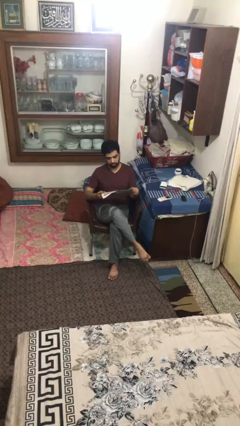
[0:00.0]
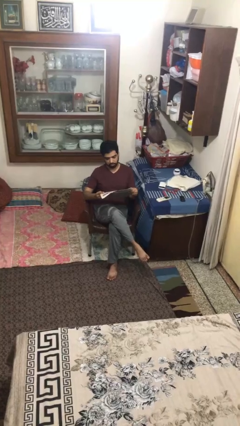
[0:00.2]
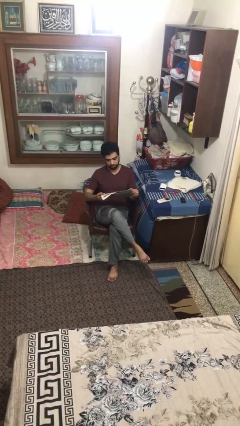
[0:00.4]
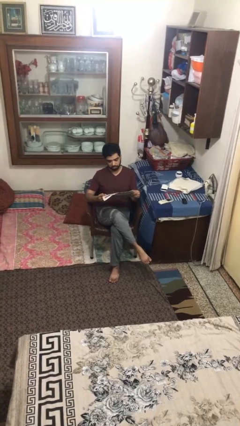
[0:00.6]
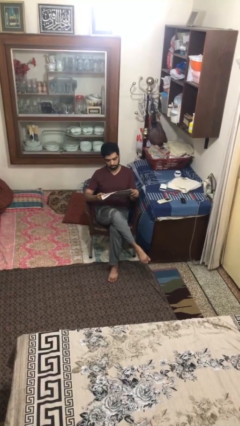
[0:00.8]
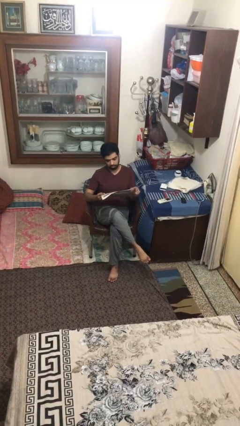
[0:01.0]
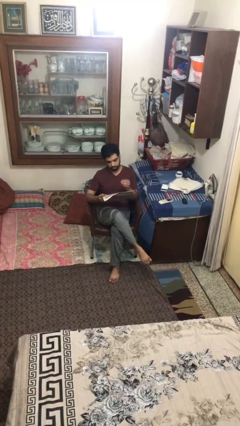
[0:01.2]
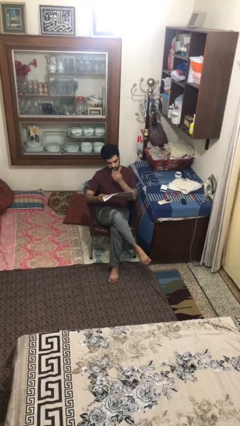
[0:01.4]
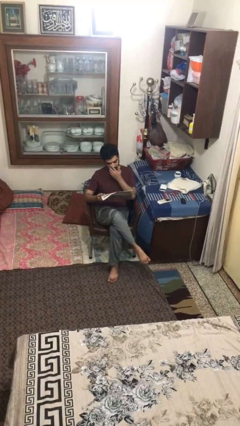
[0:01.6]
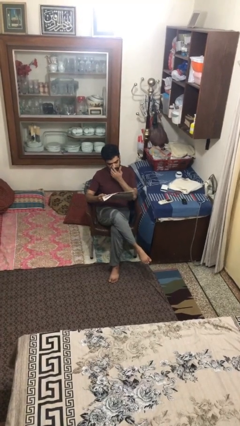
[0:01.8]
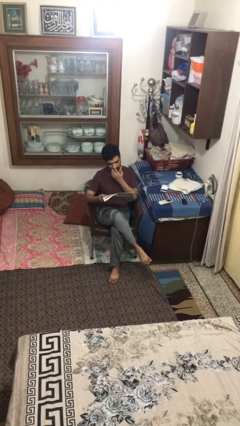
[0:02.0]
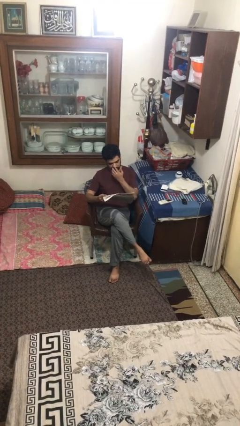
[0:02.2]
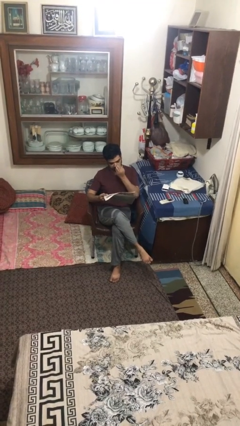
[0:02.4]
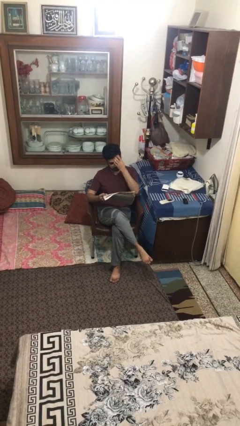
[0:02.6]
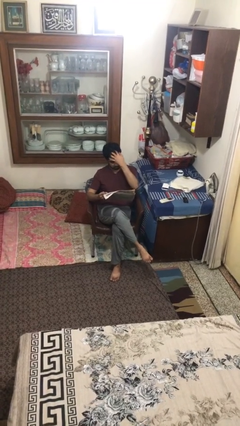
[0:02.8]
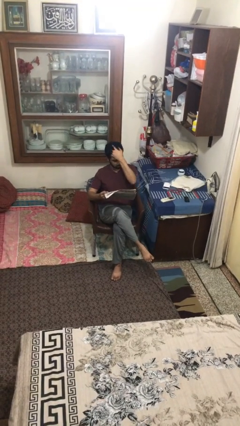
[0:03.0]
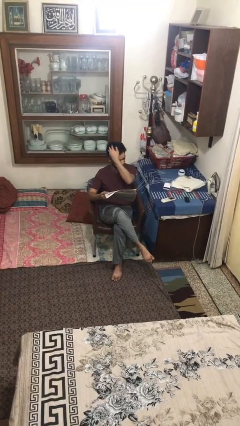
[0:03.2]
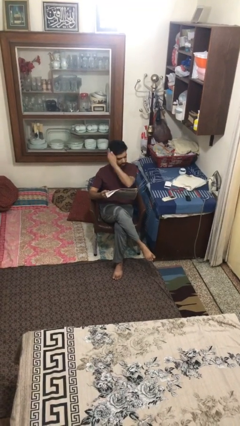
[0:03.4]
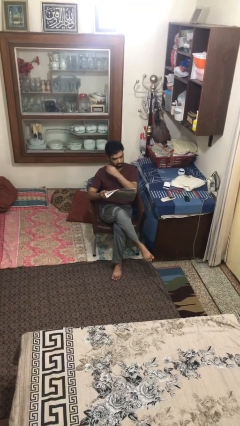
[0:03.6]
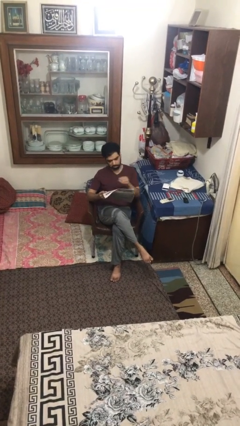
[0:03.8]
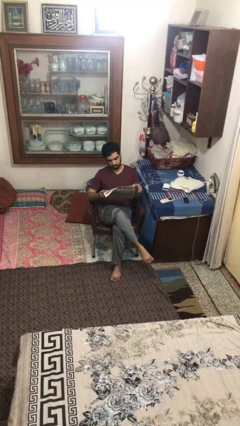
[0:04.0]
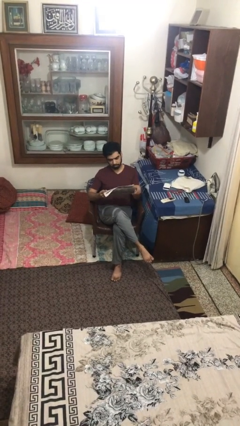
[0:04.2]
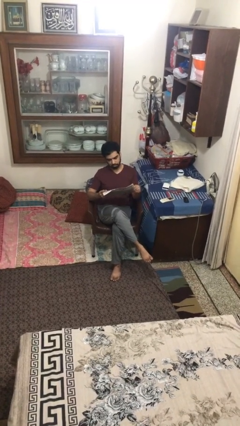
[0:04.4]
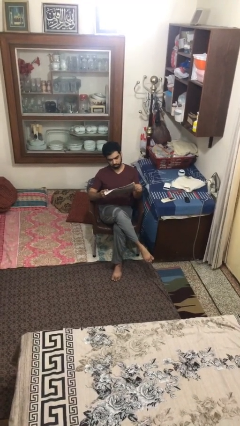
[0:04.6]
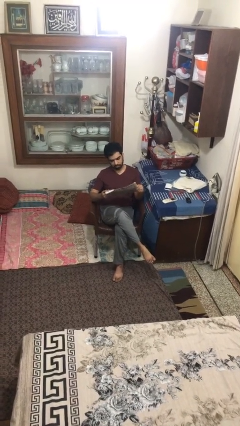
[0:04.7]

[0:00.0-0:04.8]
person reads document

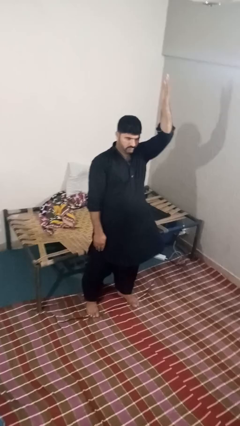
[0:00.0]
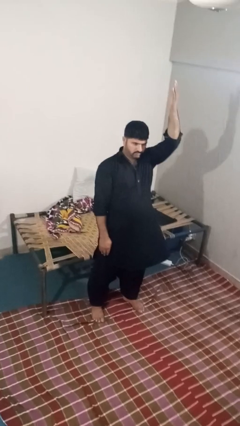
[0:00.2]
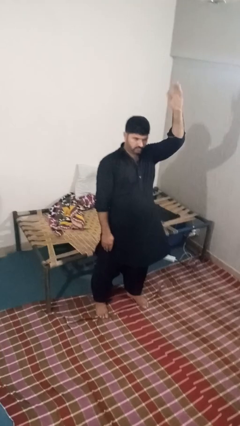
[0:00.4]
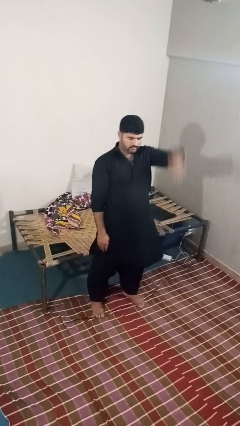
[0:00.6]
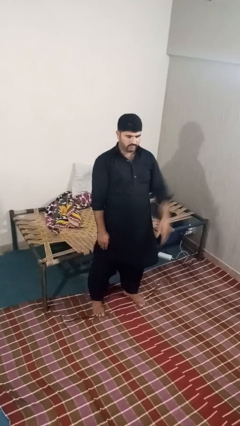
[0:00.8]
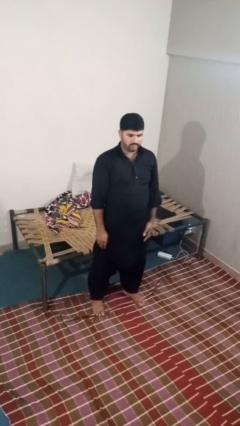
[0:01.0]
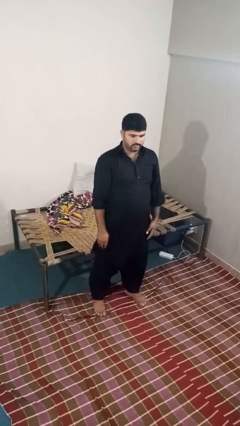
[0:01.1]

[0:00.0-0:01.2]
person gestures swipe down

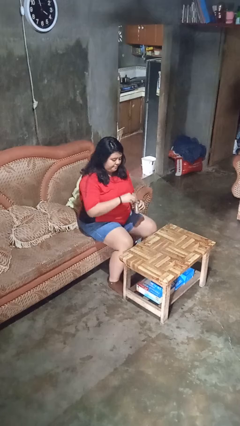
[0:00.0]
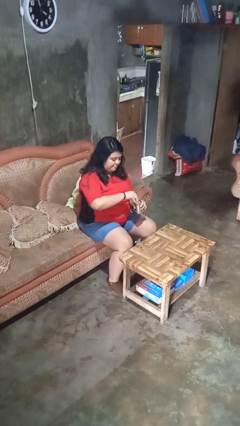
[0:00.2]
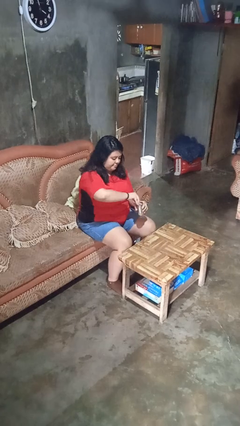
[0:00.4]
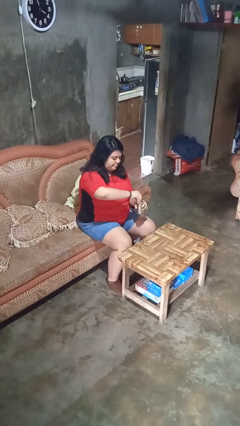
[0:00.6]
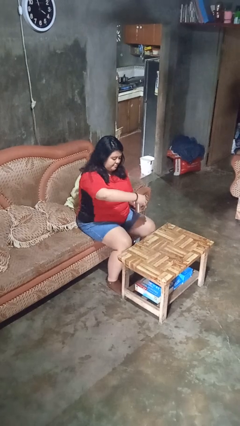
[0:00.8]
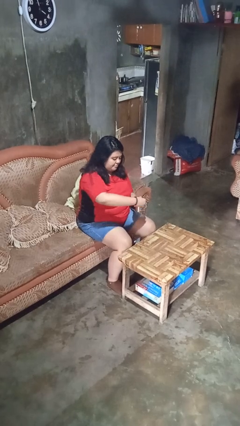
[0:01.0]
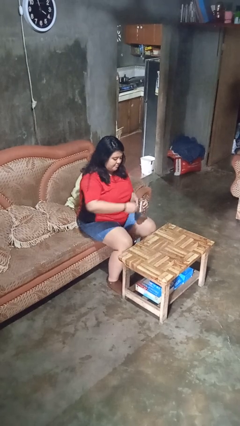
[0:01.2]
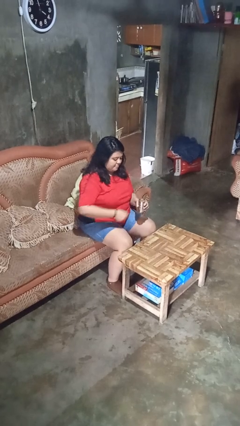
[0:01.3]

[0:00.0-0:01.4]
person opens beverage can

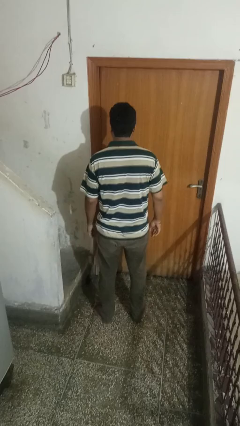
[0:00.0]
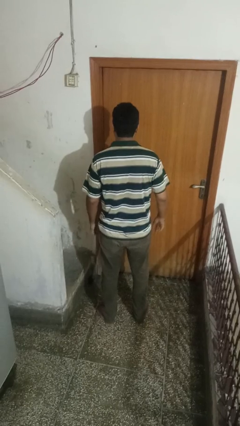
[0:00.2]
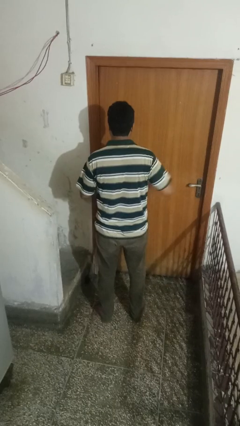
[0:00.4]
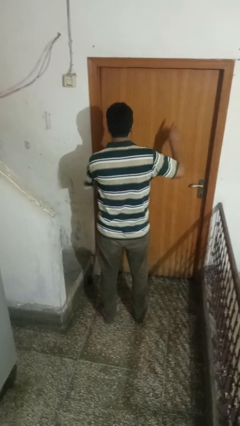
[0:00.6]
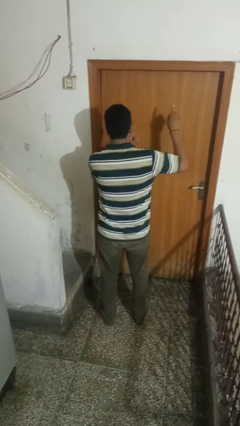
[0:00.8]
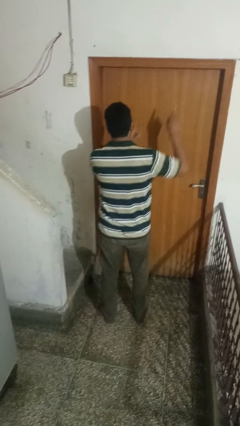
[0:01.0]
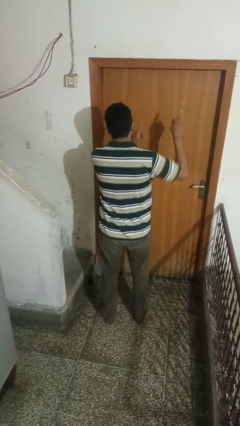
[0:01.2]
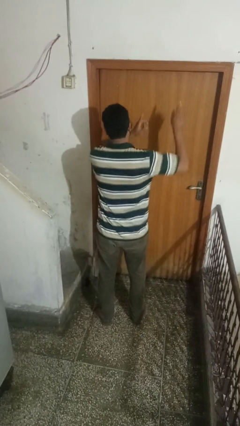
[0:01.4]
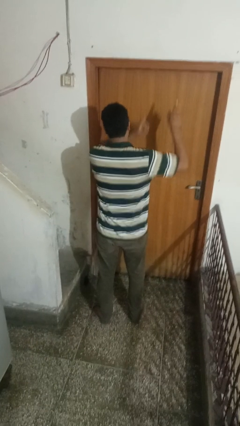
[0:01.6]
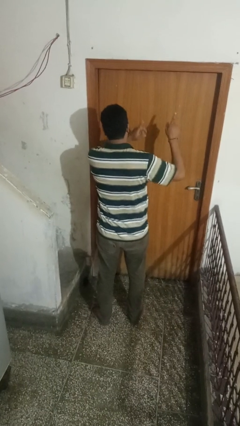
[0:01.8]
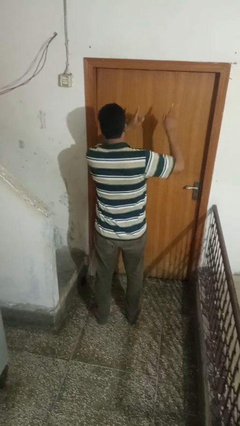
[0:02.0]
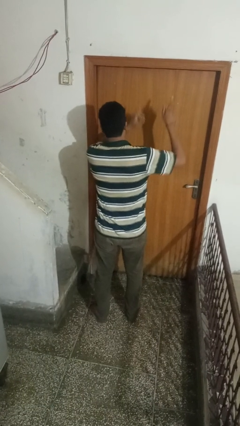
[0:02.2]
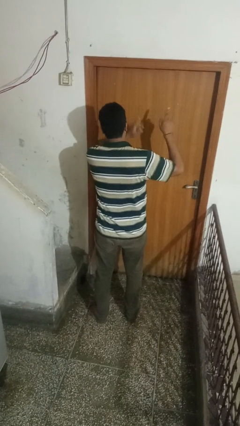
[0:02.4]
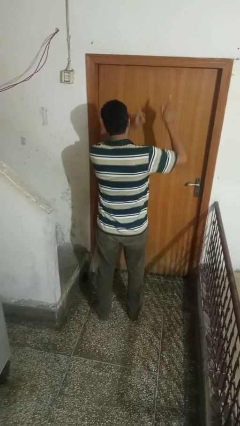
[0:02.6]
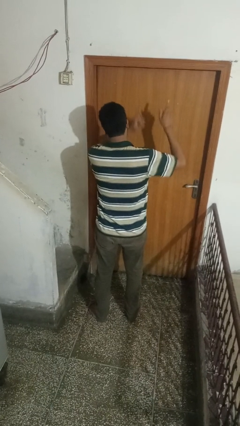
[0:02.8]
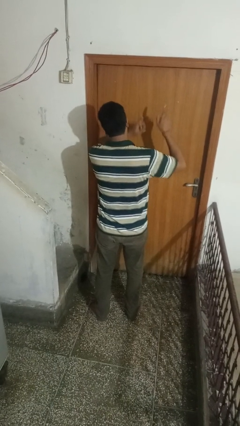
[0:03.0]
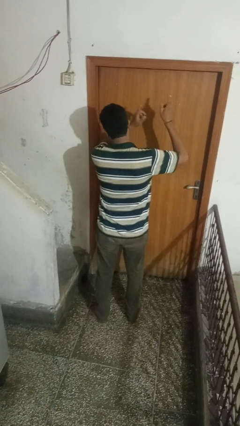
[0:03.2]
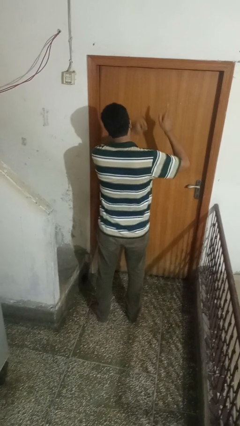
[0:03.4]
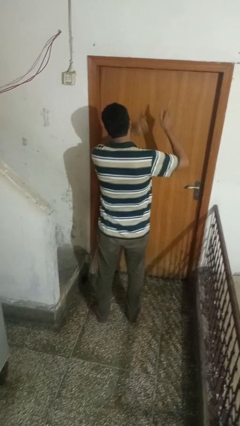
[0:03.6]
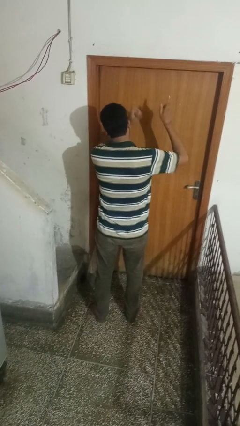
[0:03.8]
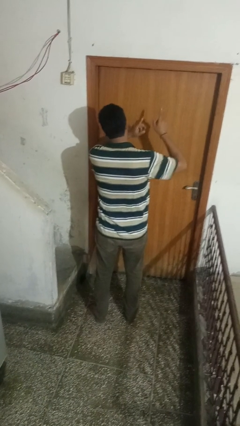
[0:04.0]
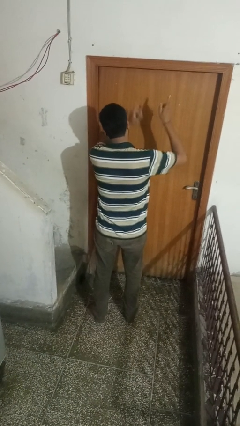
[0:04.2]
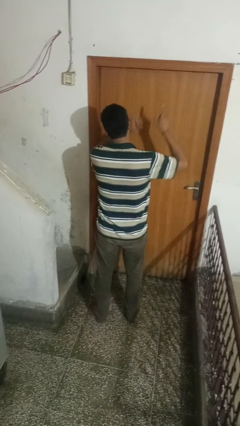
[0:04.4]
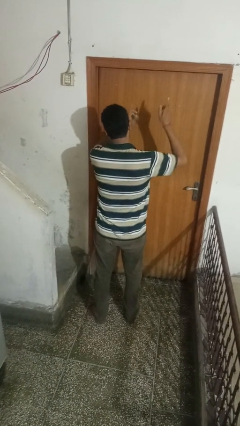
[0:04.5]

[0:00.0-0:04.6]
person dances in place

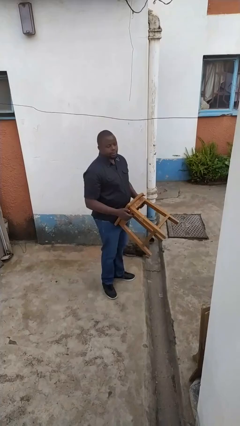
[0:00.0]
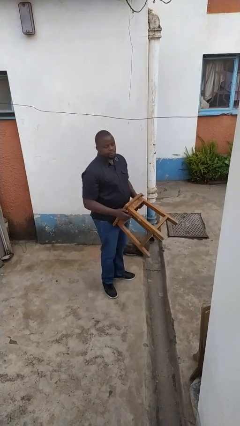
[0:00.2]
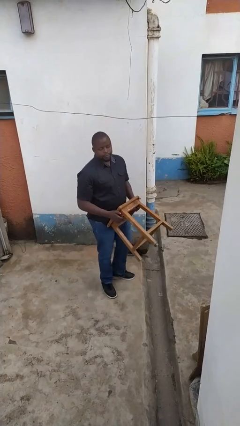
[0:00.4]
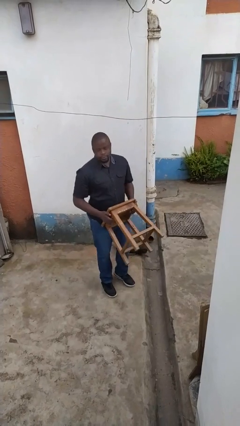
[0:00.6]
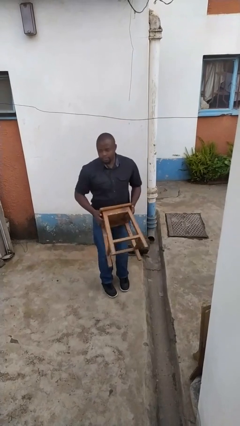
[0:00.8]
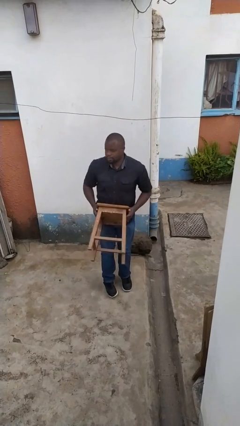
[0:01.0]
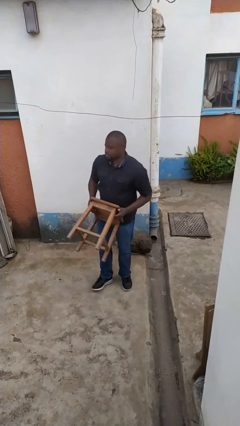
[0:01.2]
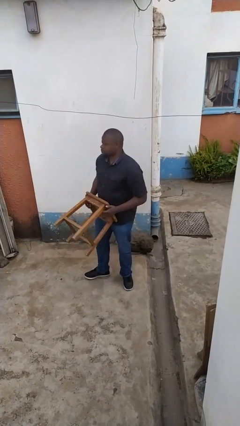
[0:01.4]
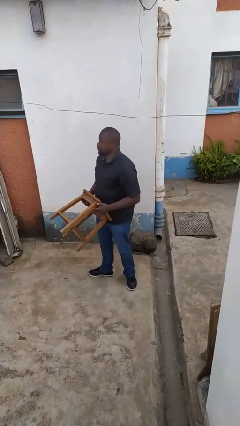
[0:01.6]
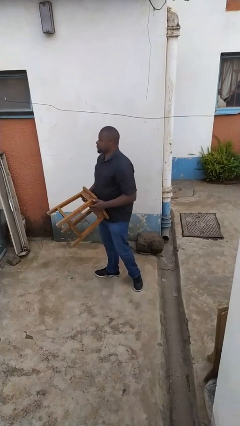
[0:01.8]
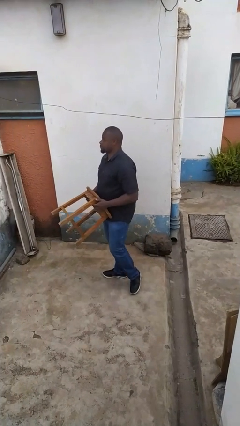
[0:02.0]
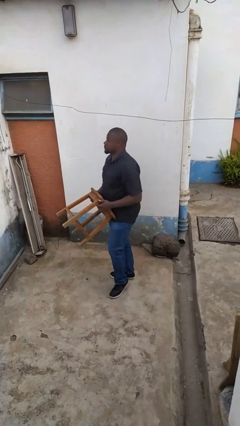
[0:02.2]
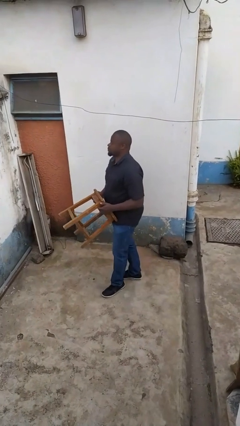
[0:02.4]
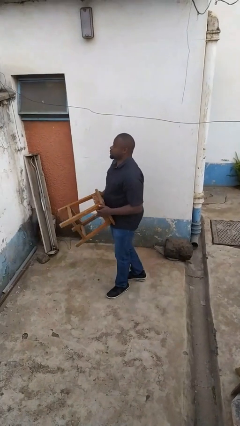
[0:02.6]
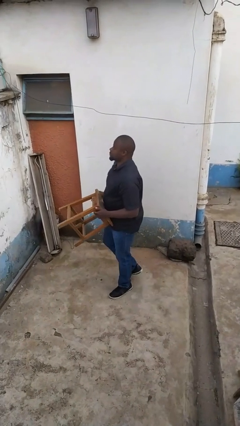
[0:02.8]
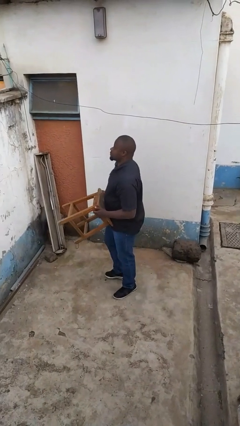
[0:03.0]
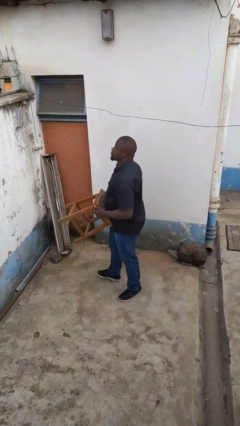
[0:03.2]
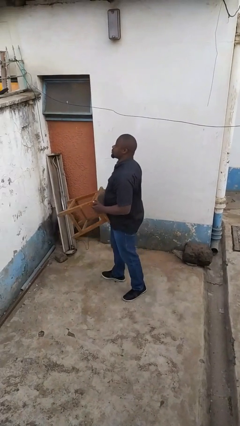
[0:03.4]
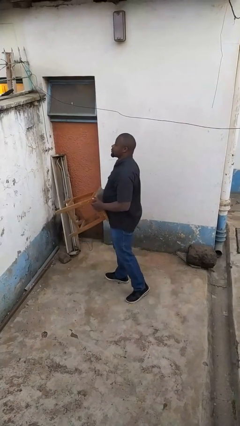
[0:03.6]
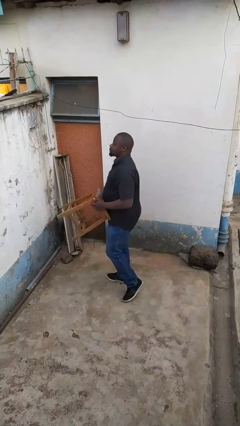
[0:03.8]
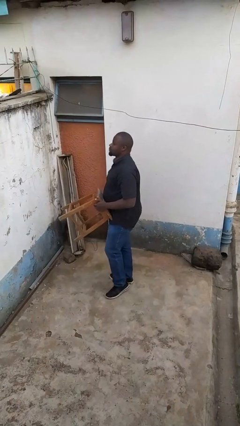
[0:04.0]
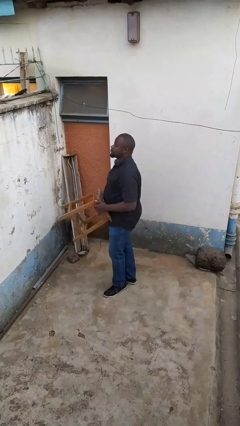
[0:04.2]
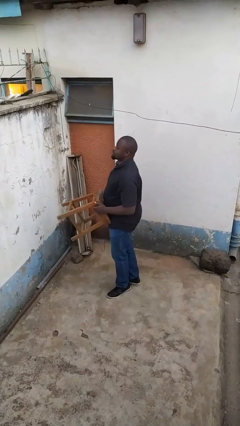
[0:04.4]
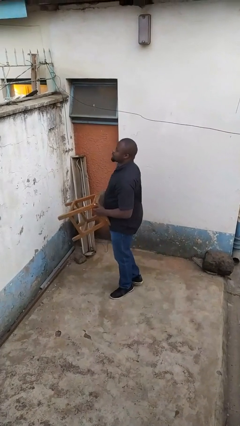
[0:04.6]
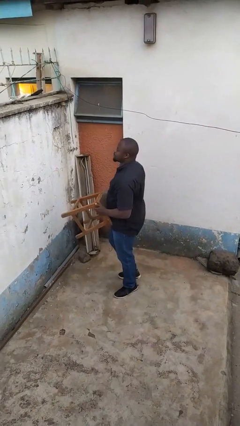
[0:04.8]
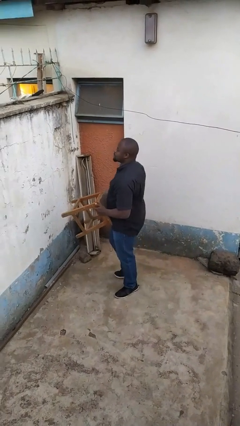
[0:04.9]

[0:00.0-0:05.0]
person carries furniture

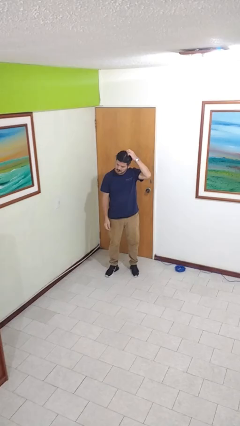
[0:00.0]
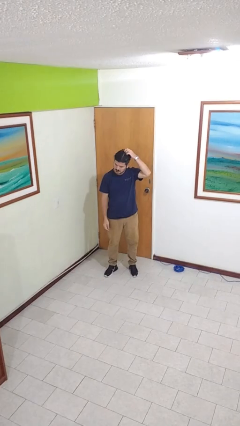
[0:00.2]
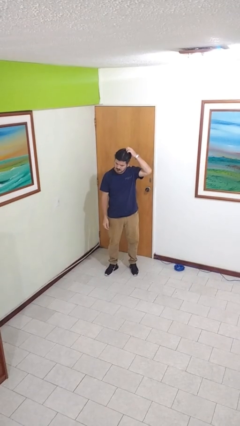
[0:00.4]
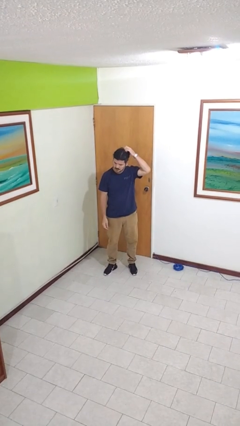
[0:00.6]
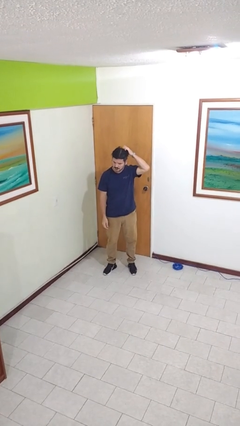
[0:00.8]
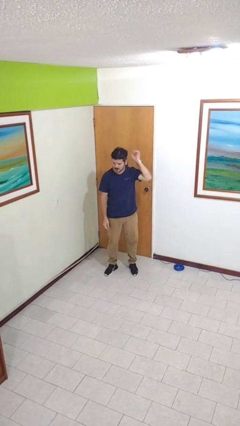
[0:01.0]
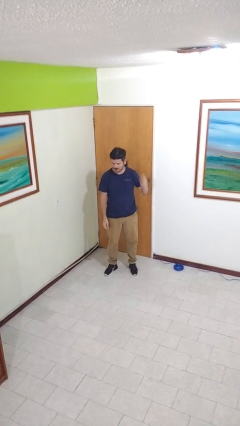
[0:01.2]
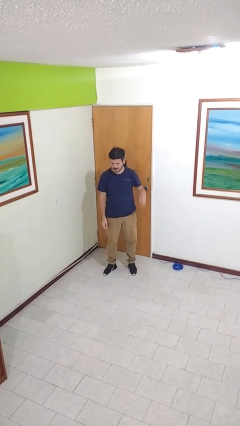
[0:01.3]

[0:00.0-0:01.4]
person scratches face
